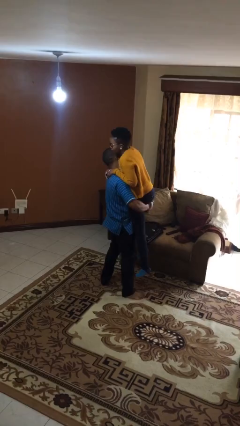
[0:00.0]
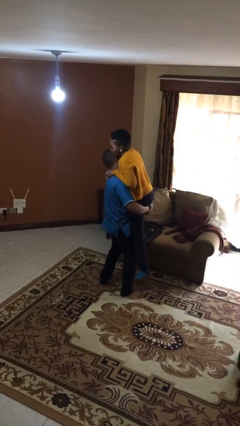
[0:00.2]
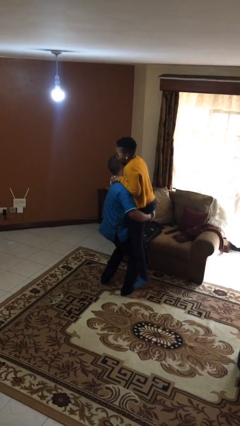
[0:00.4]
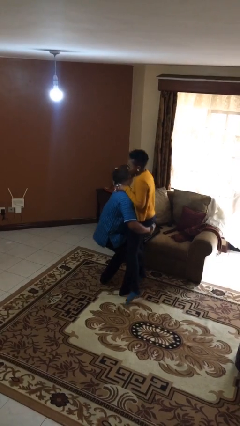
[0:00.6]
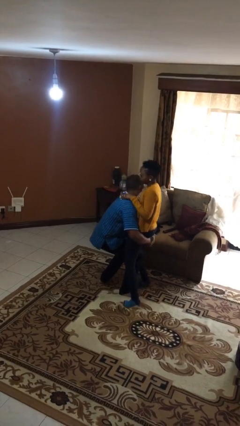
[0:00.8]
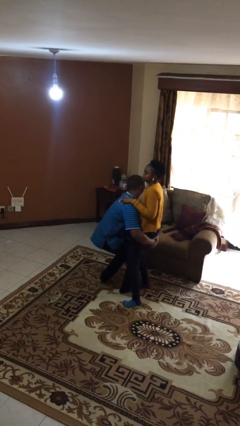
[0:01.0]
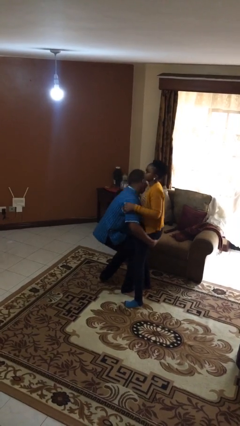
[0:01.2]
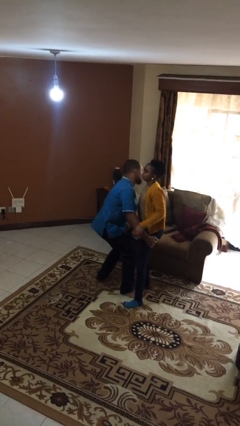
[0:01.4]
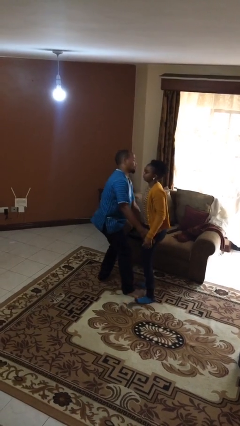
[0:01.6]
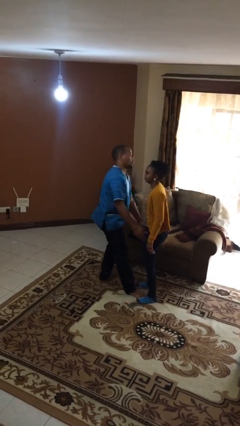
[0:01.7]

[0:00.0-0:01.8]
person puts down person

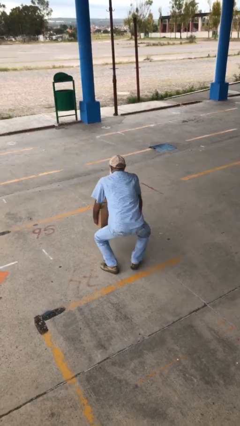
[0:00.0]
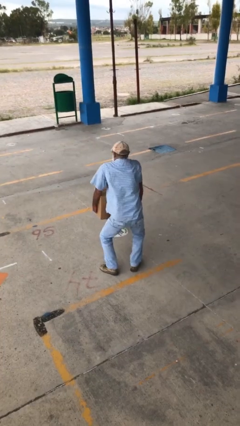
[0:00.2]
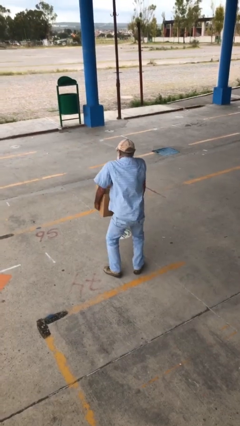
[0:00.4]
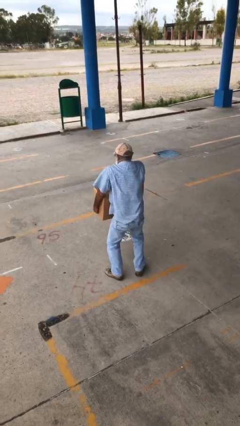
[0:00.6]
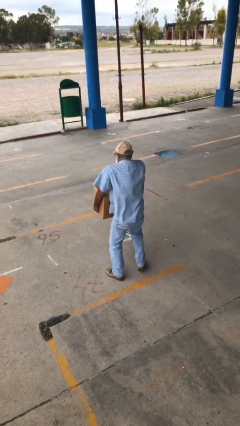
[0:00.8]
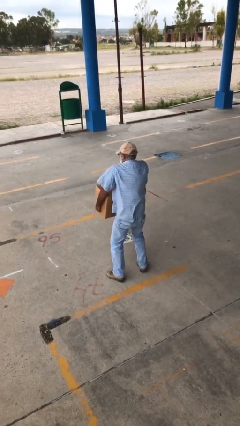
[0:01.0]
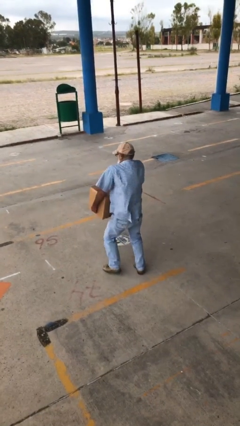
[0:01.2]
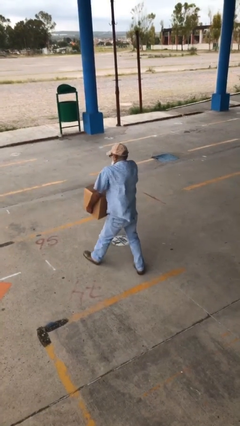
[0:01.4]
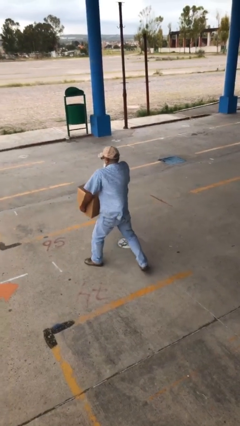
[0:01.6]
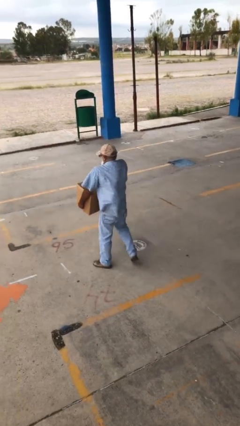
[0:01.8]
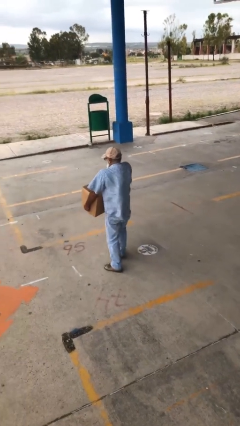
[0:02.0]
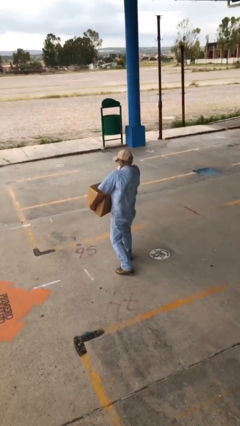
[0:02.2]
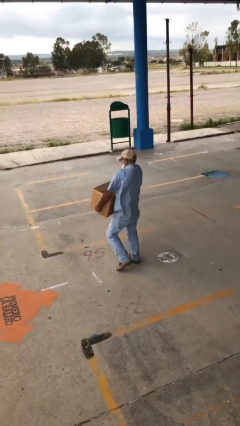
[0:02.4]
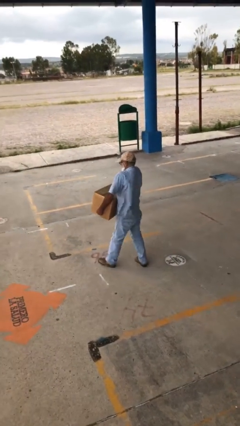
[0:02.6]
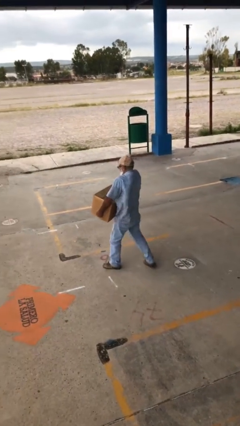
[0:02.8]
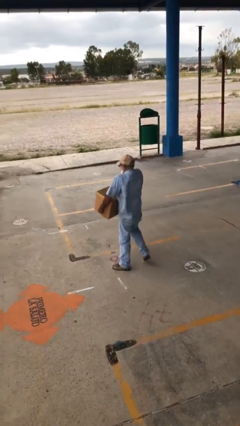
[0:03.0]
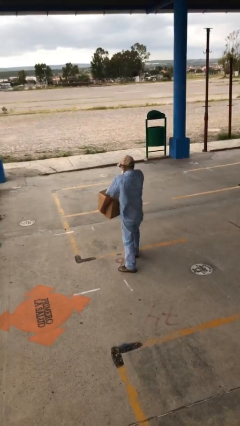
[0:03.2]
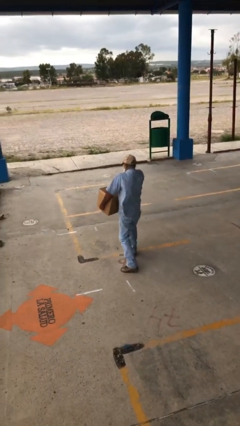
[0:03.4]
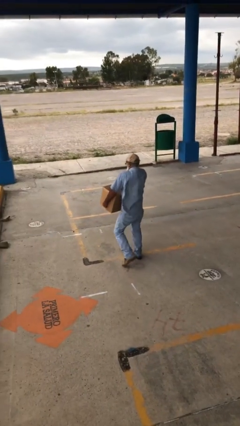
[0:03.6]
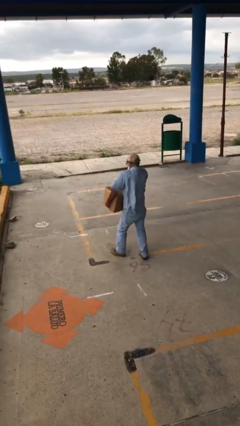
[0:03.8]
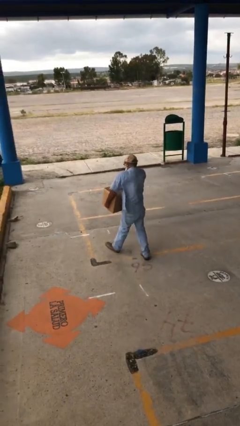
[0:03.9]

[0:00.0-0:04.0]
person carries heavy object

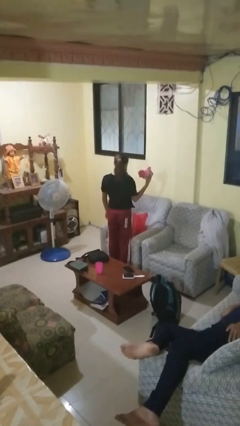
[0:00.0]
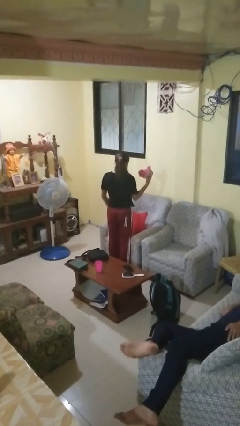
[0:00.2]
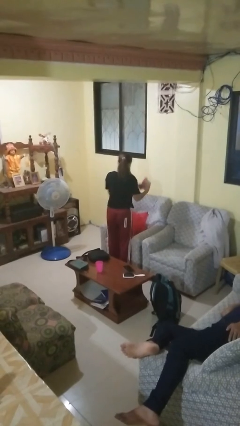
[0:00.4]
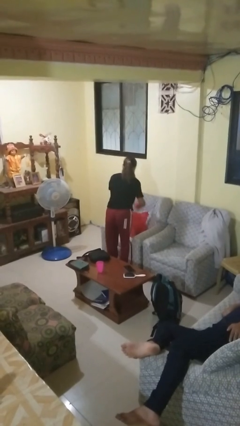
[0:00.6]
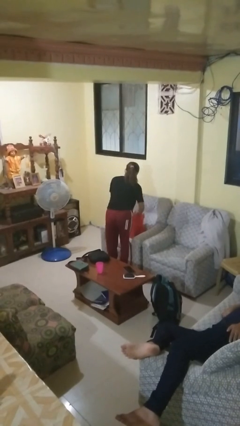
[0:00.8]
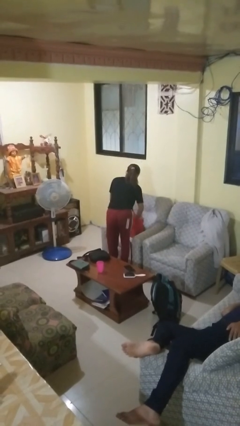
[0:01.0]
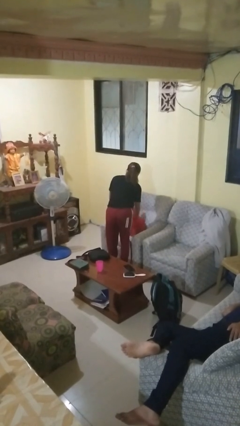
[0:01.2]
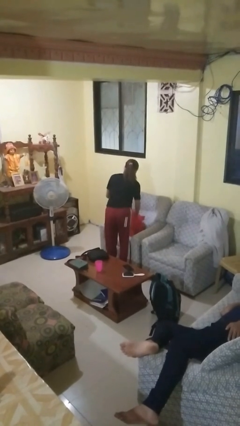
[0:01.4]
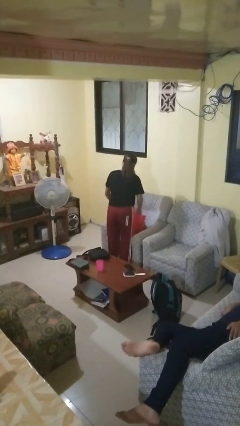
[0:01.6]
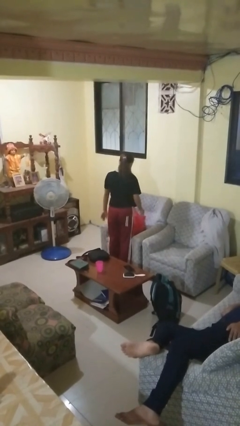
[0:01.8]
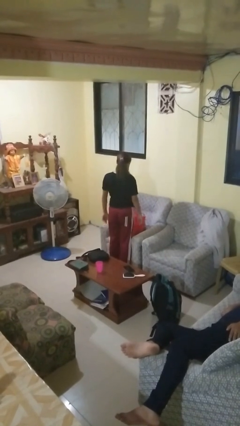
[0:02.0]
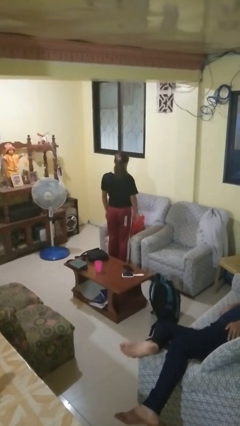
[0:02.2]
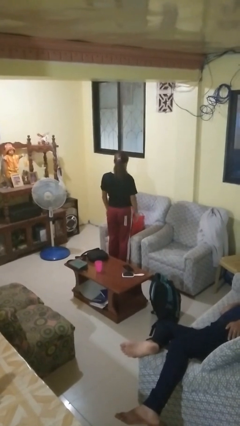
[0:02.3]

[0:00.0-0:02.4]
person puts object into bag

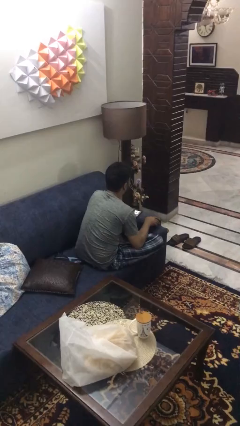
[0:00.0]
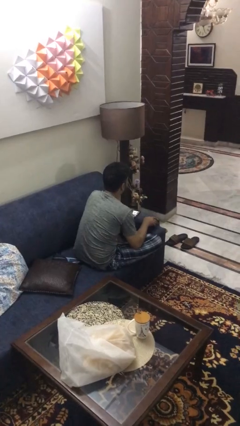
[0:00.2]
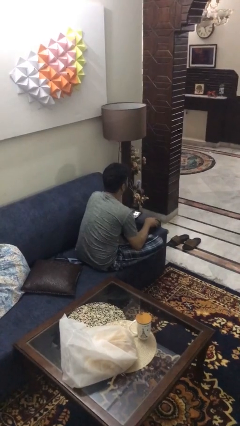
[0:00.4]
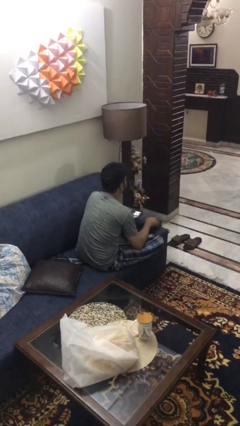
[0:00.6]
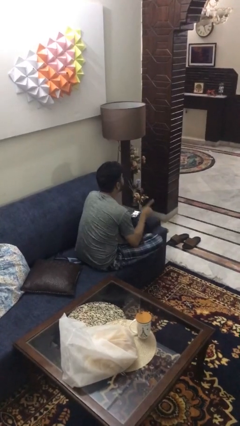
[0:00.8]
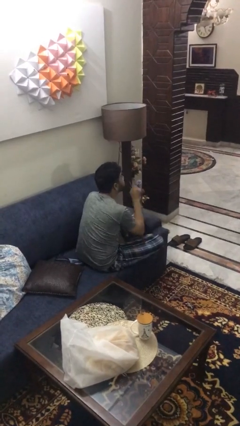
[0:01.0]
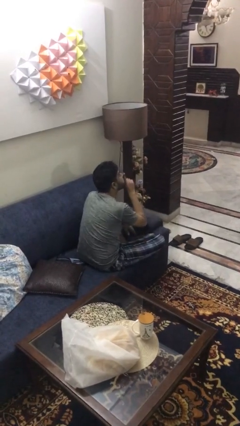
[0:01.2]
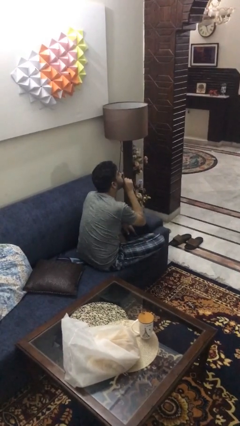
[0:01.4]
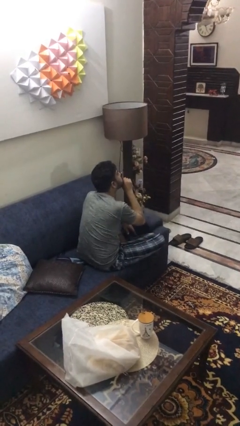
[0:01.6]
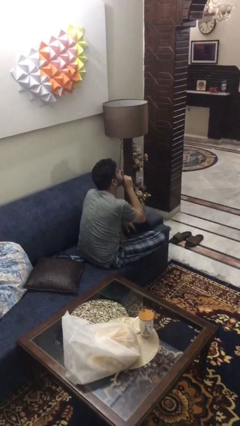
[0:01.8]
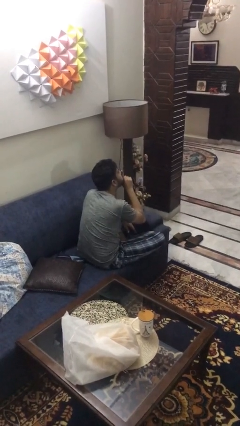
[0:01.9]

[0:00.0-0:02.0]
person gestures be quiet

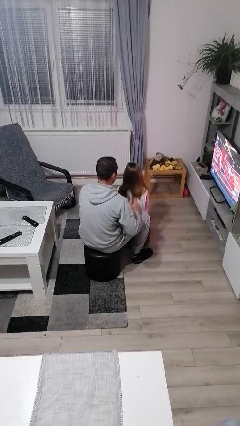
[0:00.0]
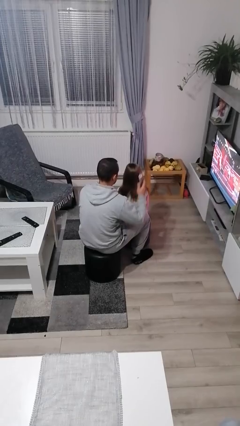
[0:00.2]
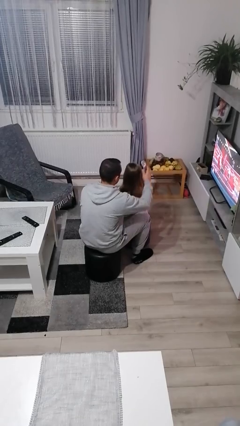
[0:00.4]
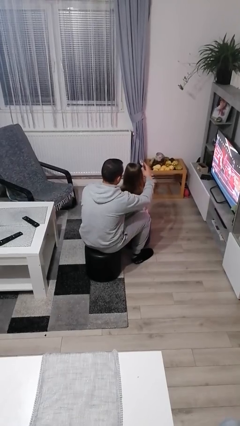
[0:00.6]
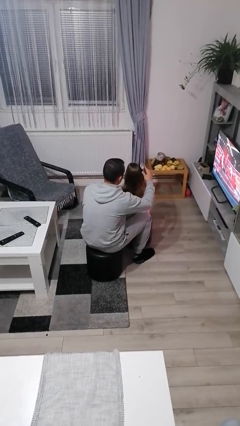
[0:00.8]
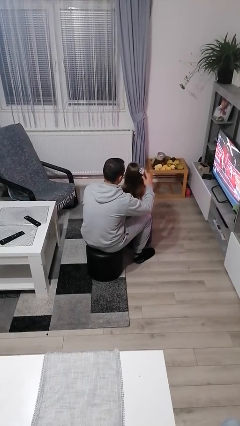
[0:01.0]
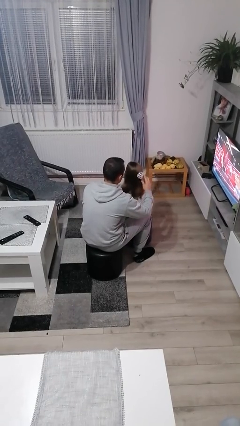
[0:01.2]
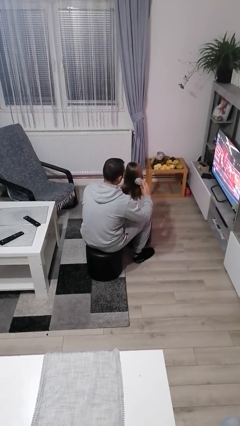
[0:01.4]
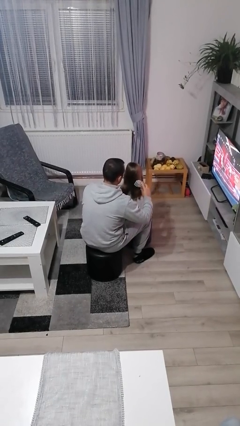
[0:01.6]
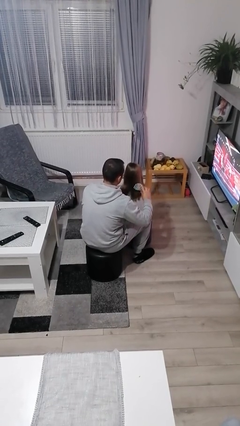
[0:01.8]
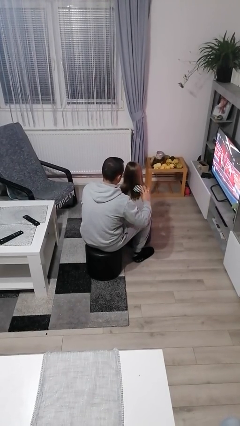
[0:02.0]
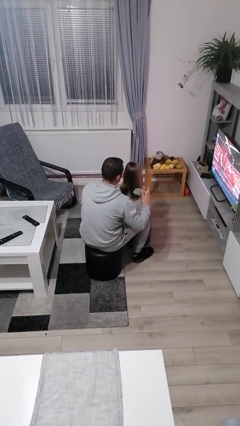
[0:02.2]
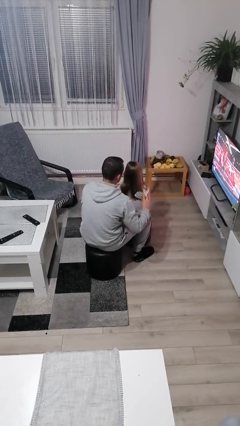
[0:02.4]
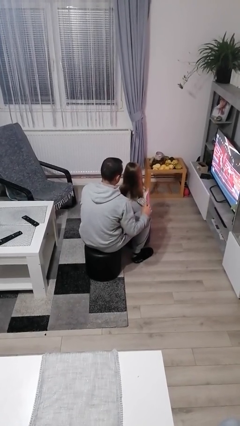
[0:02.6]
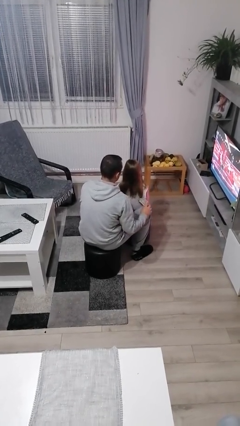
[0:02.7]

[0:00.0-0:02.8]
person brushes hair of person

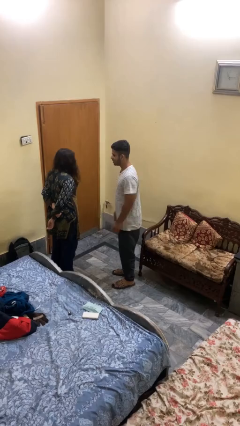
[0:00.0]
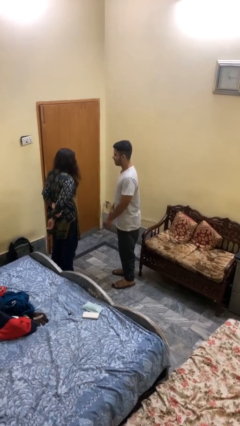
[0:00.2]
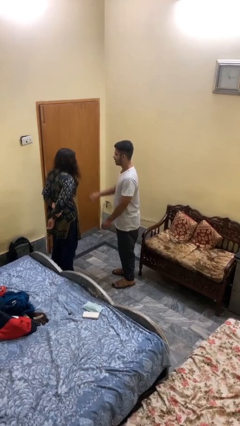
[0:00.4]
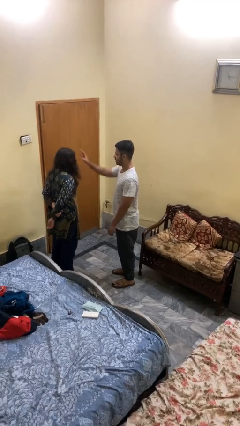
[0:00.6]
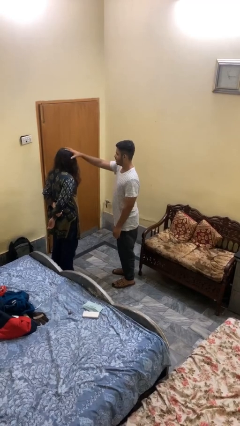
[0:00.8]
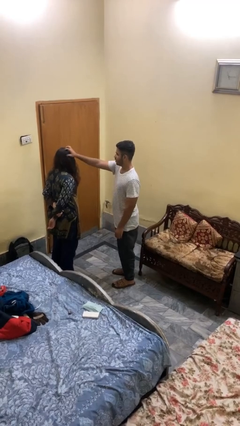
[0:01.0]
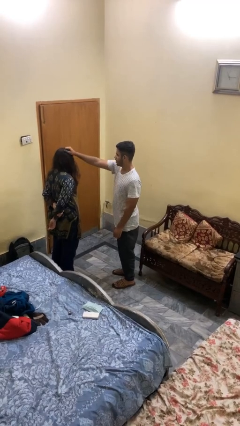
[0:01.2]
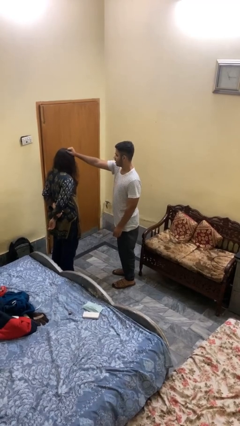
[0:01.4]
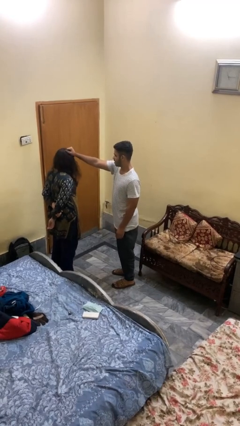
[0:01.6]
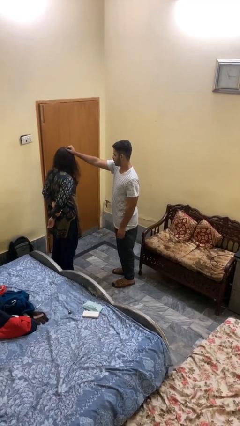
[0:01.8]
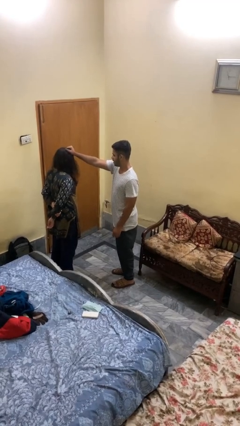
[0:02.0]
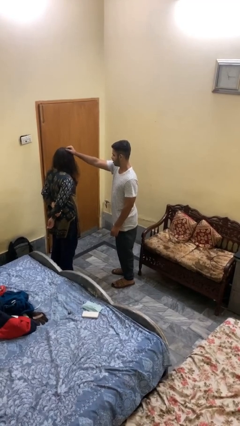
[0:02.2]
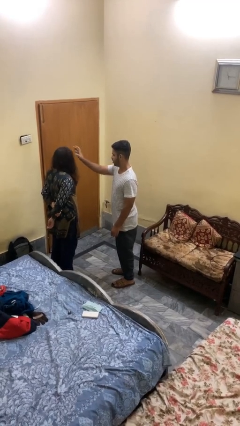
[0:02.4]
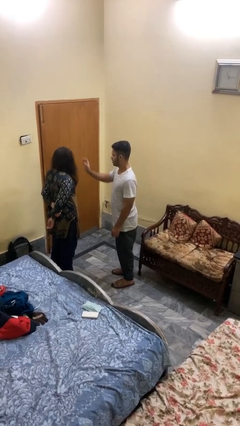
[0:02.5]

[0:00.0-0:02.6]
person grabs person by hair

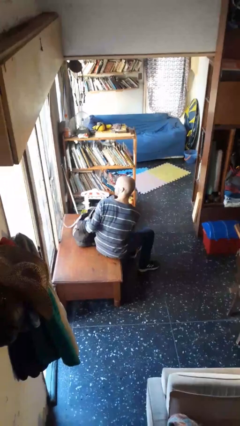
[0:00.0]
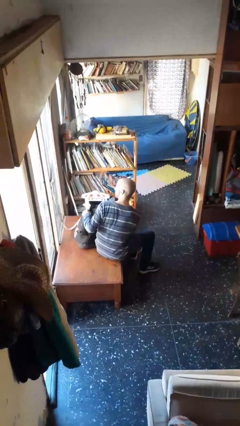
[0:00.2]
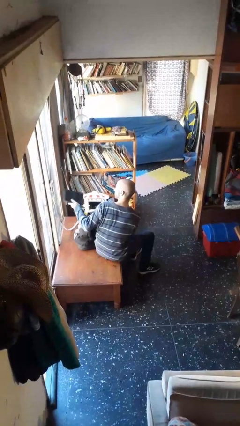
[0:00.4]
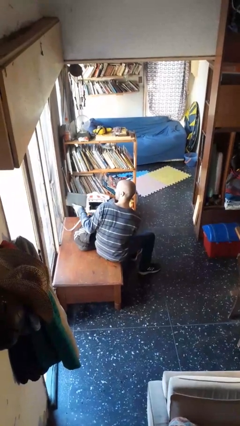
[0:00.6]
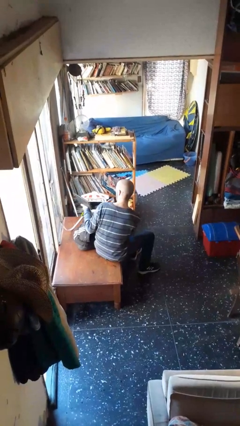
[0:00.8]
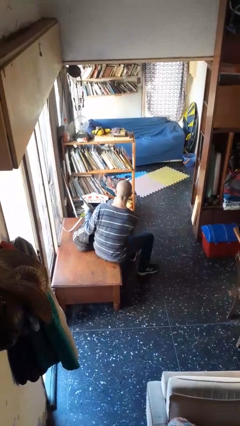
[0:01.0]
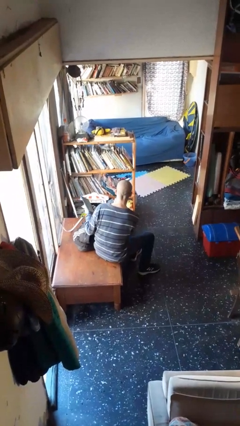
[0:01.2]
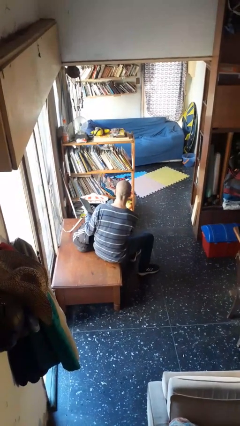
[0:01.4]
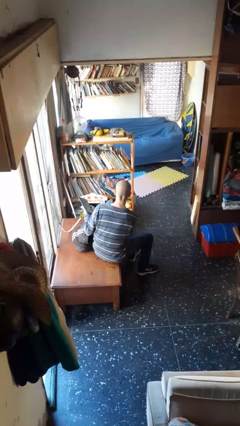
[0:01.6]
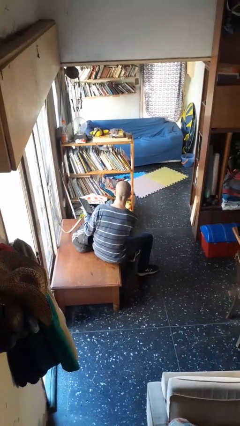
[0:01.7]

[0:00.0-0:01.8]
person takes object from backpack
